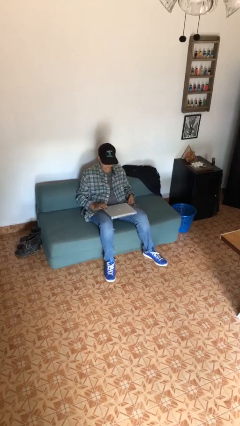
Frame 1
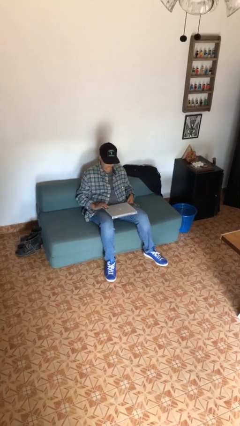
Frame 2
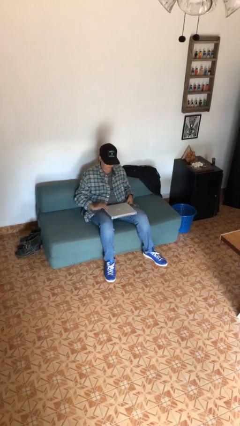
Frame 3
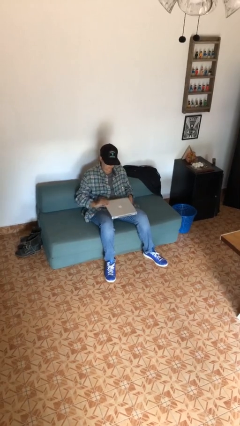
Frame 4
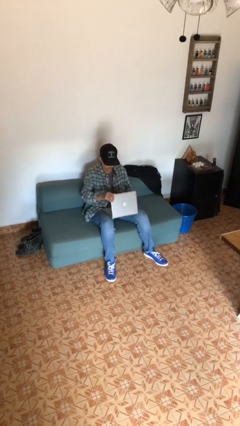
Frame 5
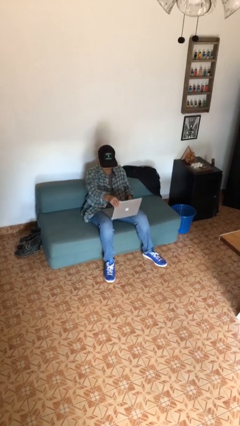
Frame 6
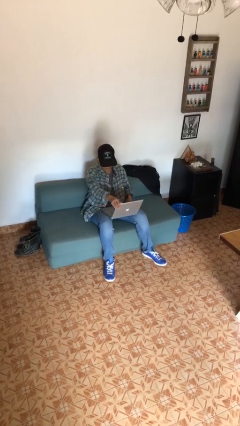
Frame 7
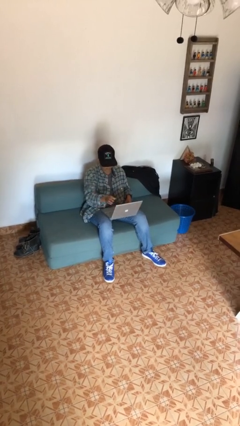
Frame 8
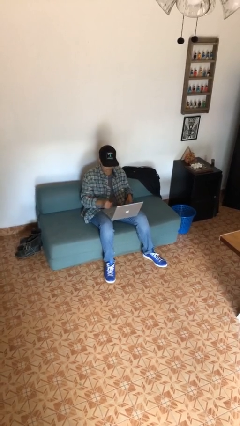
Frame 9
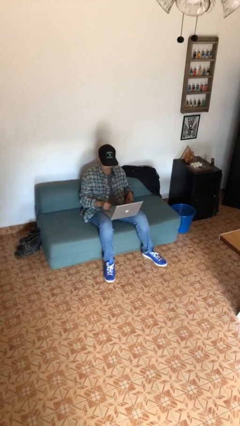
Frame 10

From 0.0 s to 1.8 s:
person opens laptop

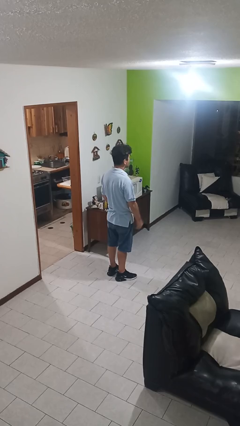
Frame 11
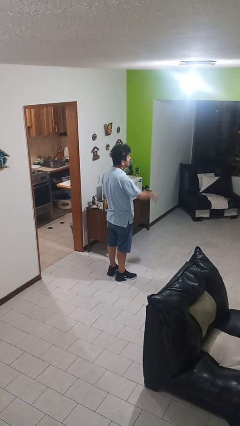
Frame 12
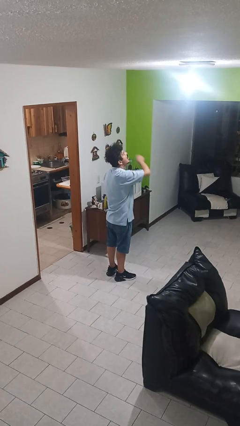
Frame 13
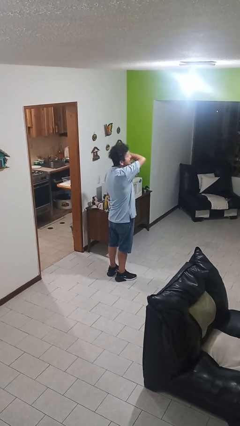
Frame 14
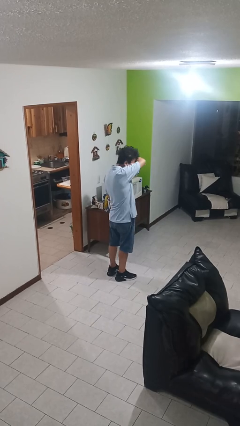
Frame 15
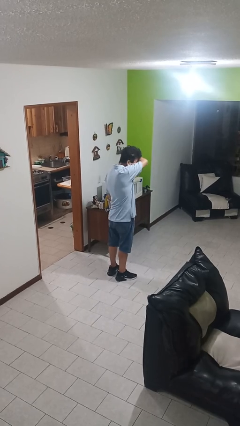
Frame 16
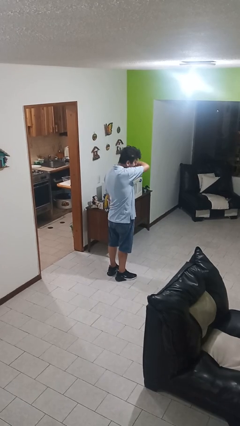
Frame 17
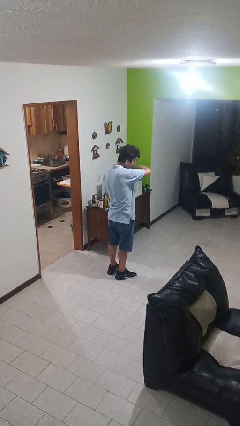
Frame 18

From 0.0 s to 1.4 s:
person sneezes into arm

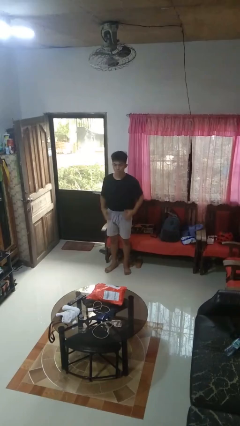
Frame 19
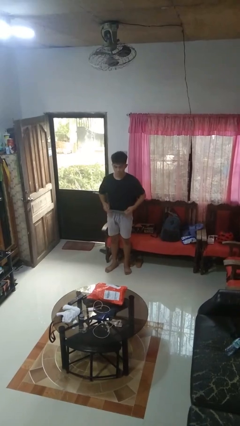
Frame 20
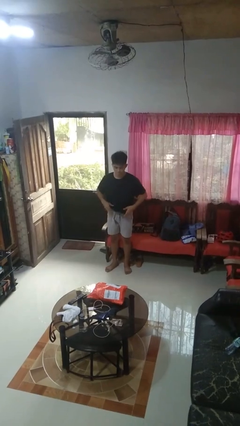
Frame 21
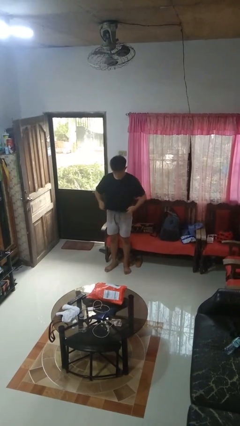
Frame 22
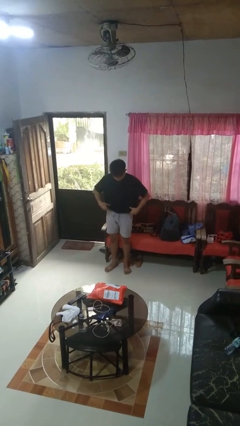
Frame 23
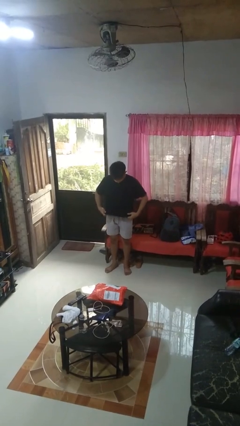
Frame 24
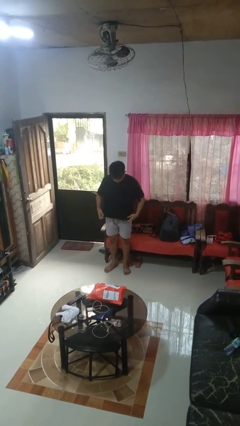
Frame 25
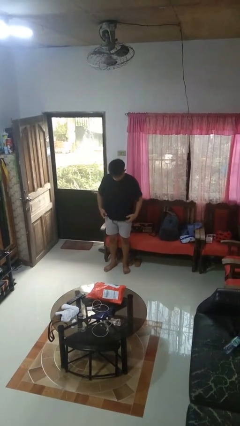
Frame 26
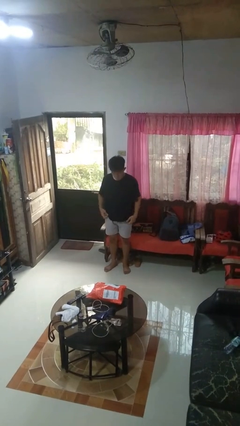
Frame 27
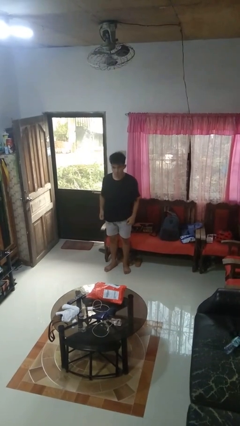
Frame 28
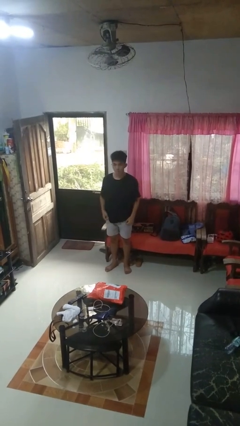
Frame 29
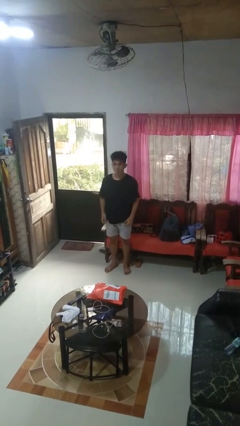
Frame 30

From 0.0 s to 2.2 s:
person untucks shirt

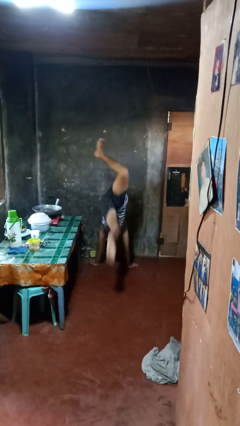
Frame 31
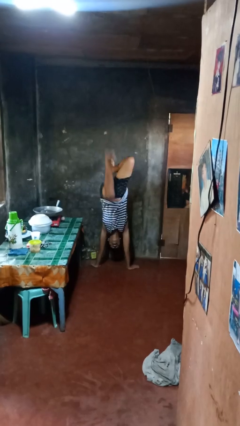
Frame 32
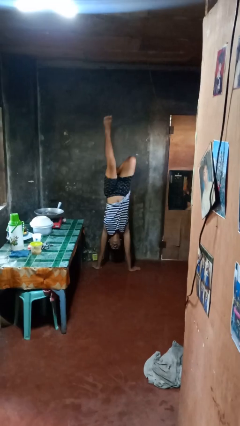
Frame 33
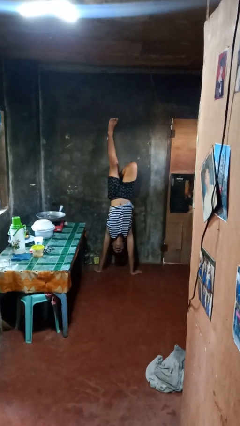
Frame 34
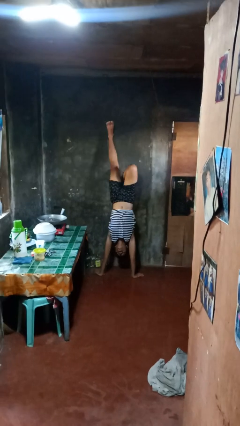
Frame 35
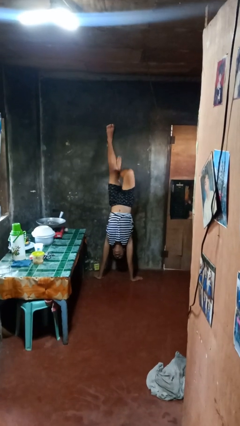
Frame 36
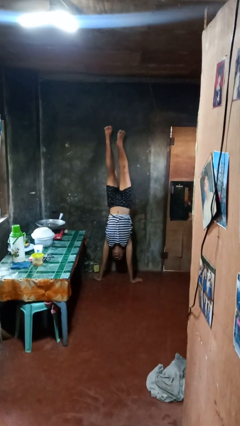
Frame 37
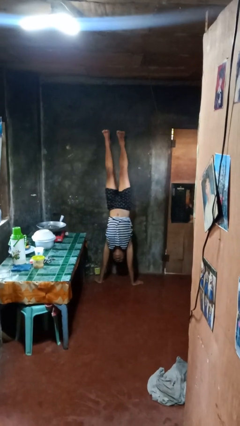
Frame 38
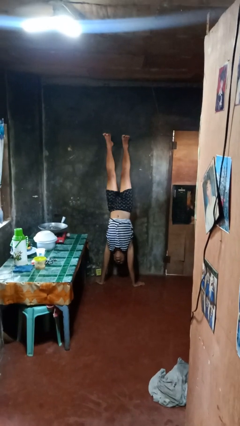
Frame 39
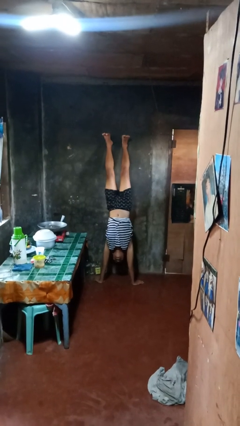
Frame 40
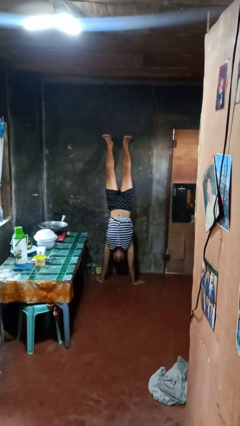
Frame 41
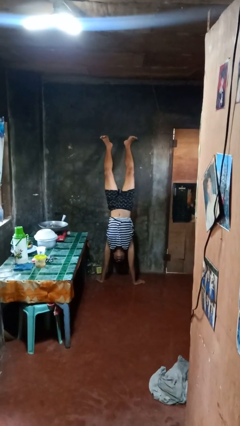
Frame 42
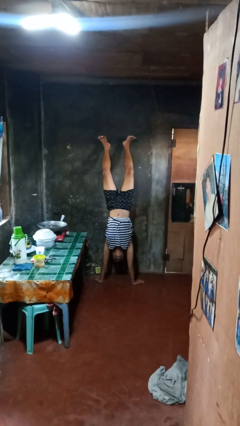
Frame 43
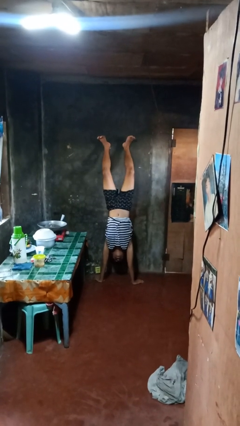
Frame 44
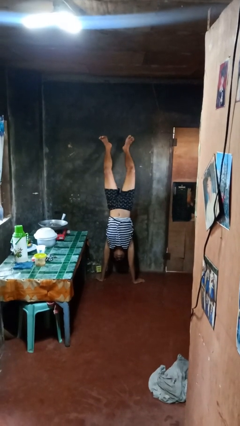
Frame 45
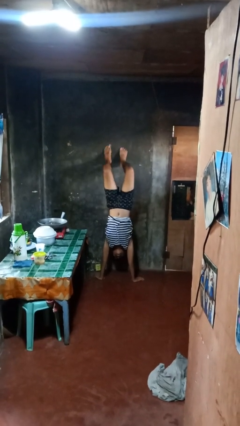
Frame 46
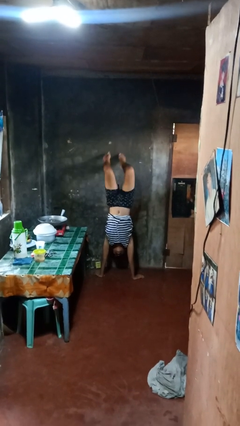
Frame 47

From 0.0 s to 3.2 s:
person handstand

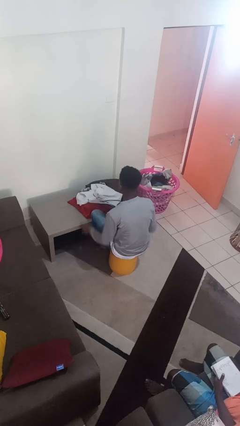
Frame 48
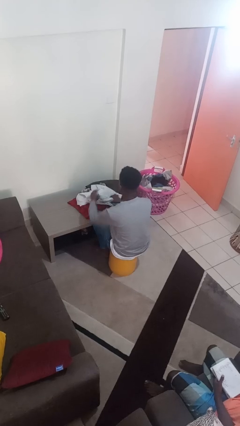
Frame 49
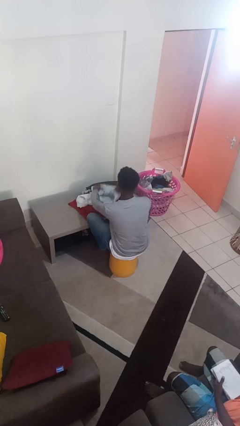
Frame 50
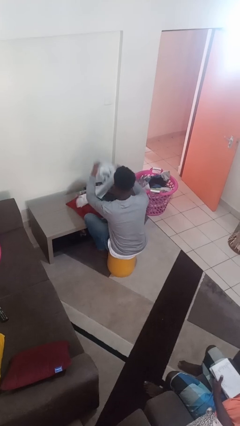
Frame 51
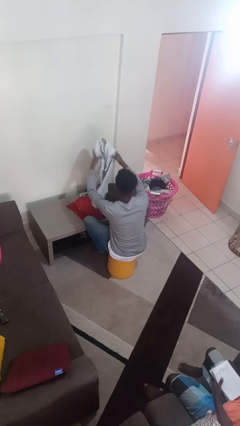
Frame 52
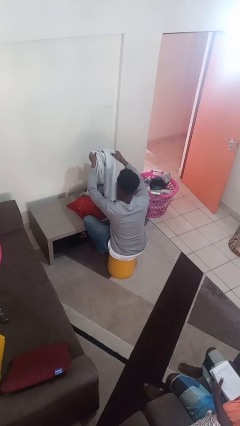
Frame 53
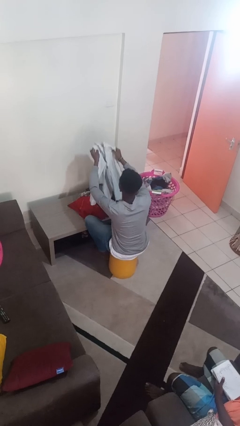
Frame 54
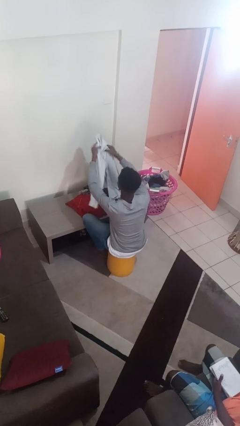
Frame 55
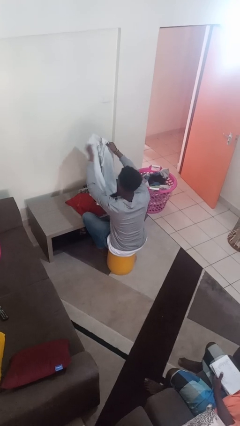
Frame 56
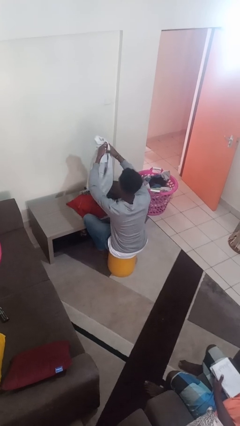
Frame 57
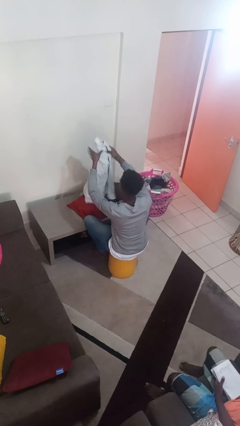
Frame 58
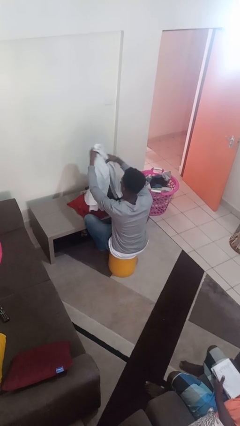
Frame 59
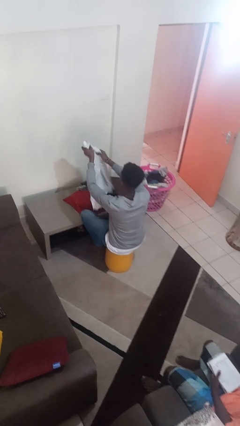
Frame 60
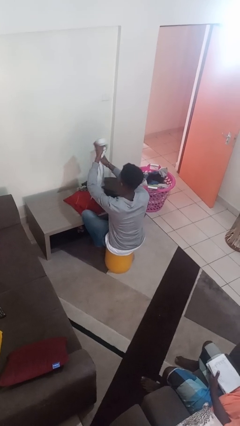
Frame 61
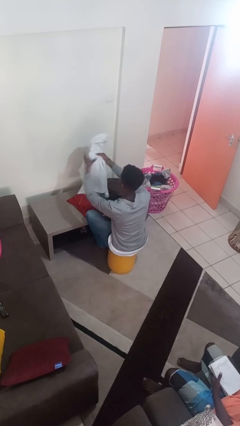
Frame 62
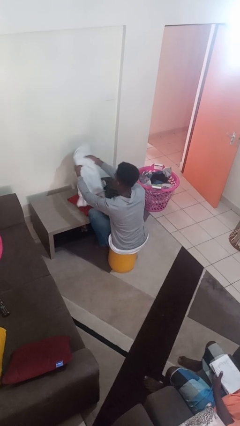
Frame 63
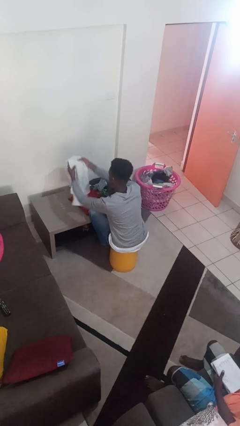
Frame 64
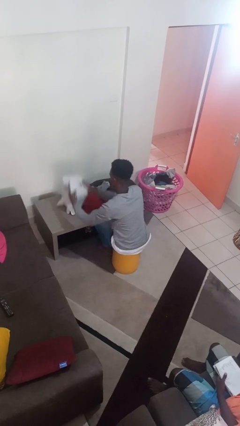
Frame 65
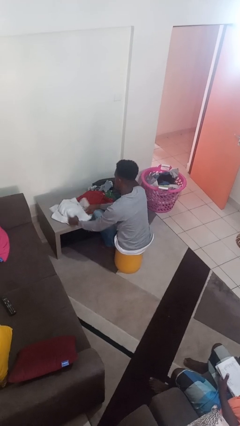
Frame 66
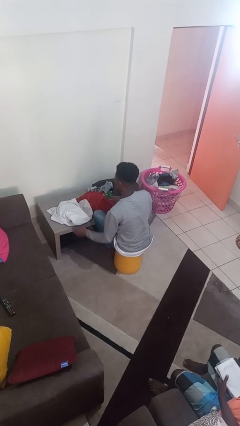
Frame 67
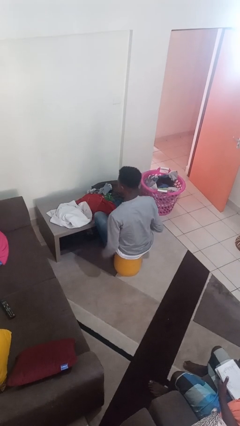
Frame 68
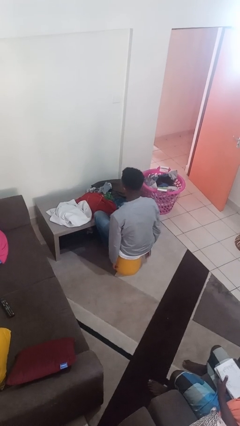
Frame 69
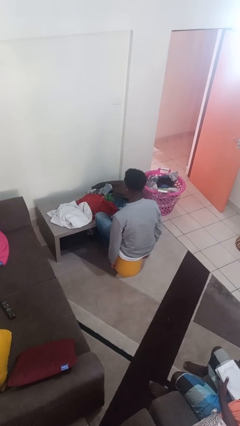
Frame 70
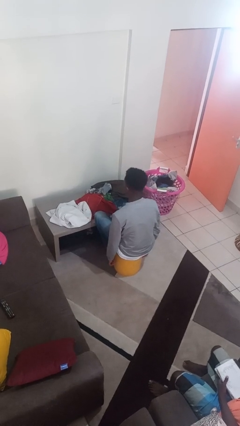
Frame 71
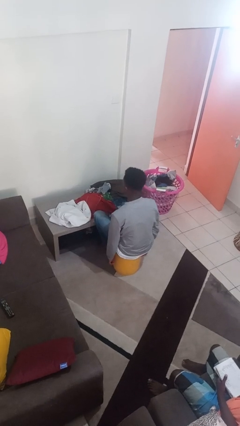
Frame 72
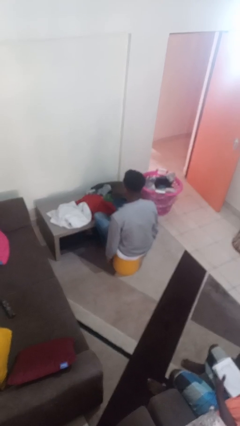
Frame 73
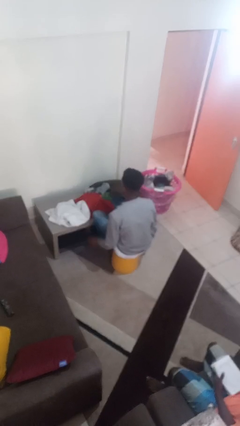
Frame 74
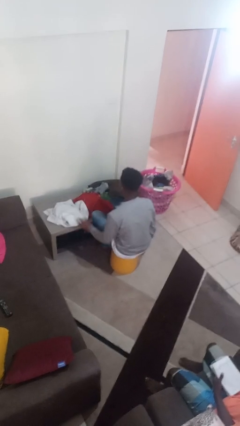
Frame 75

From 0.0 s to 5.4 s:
person folds shirt

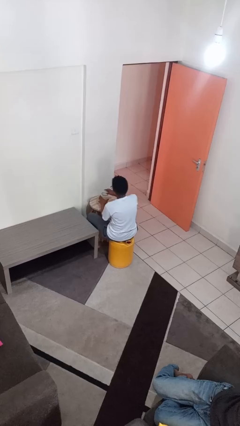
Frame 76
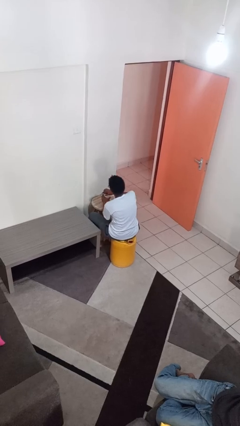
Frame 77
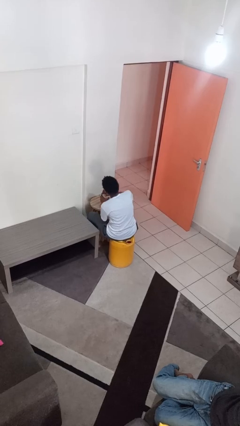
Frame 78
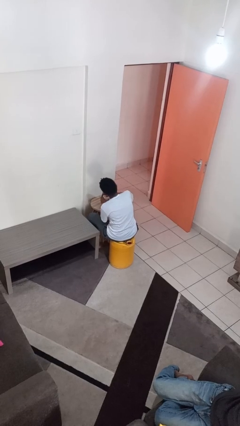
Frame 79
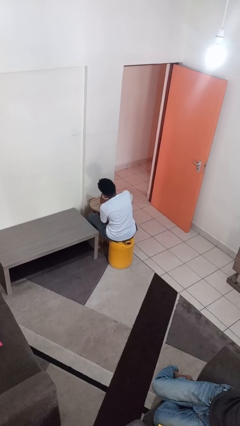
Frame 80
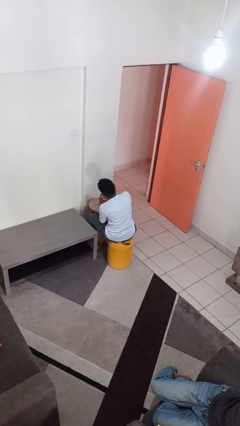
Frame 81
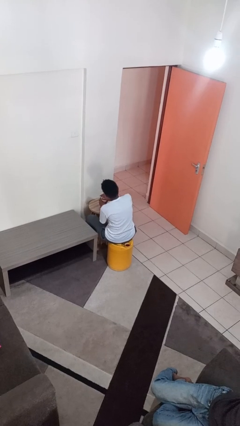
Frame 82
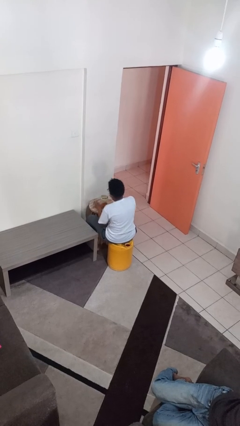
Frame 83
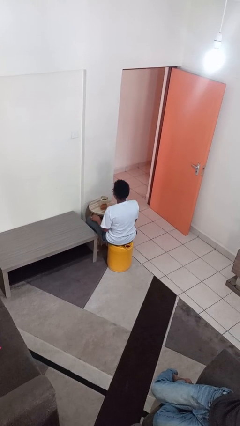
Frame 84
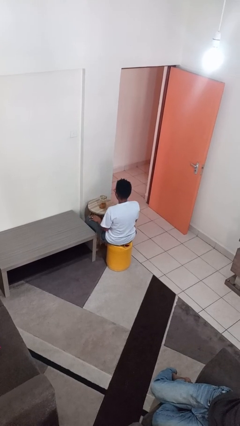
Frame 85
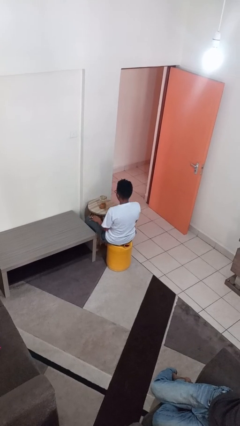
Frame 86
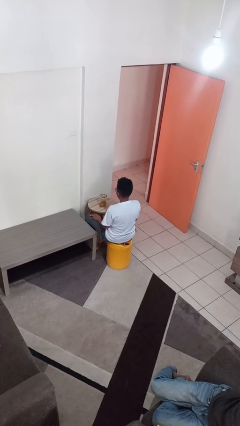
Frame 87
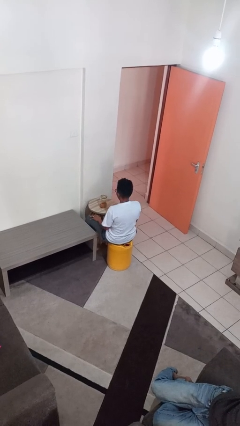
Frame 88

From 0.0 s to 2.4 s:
person closes jar

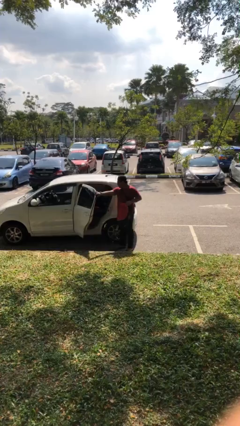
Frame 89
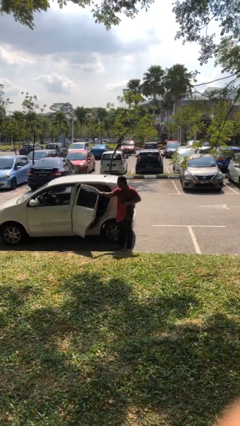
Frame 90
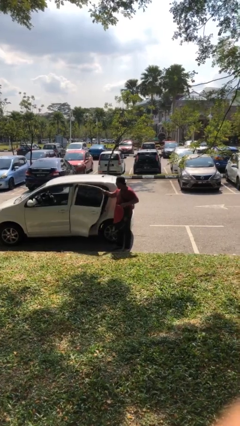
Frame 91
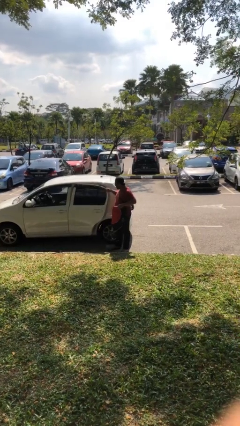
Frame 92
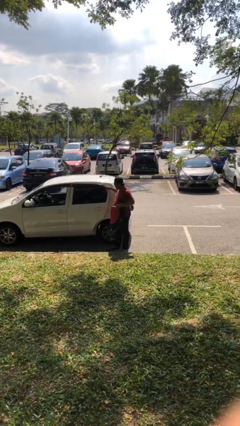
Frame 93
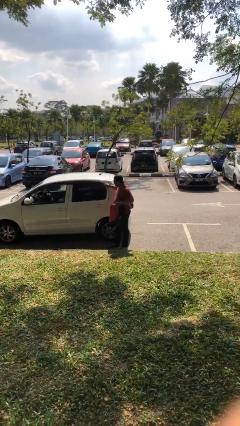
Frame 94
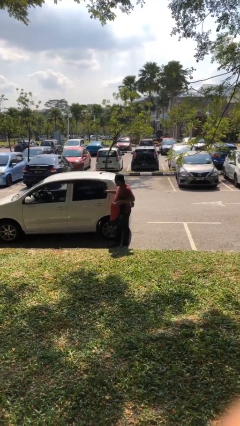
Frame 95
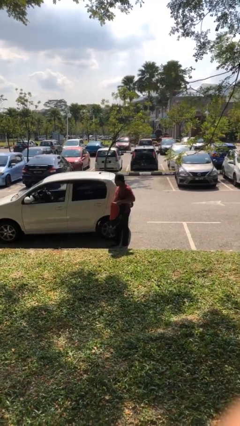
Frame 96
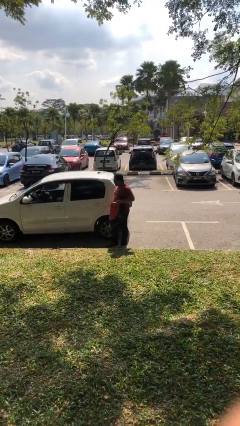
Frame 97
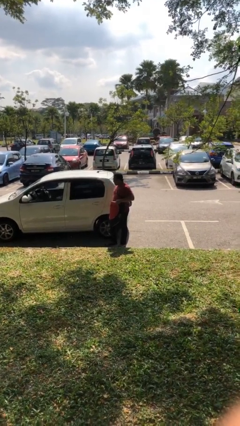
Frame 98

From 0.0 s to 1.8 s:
person closes car door
